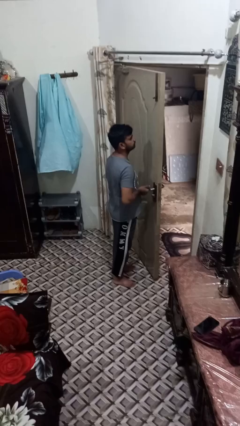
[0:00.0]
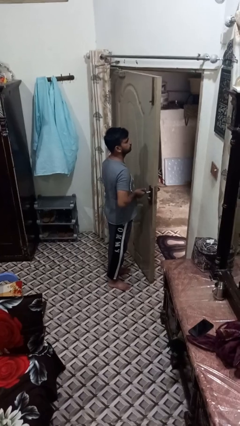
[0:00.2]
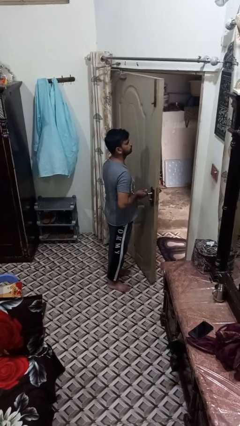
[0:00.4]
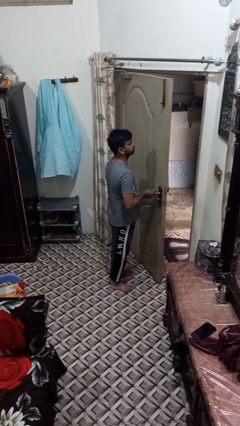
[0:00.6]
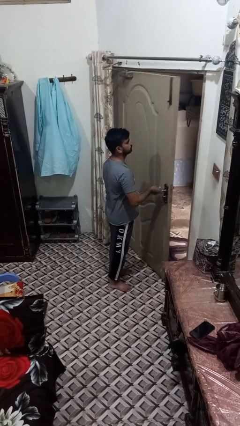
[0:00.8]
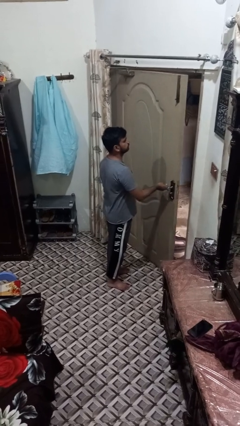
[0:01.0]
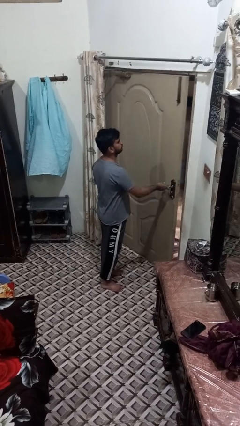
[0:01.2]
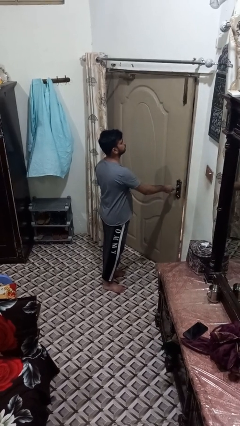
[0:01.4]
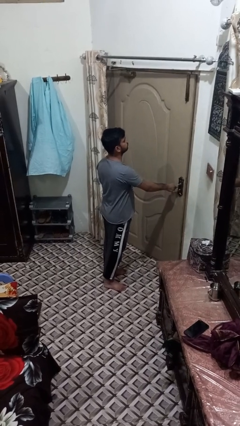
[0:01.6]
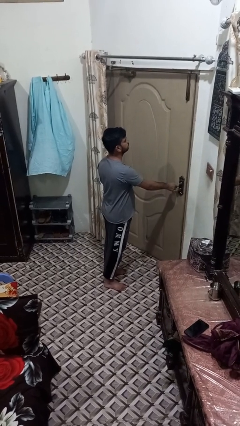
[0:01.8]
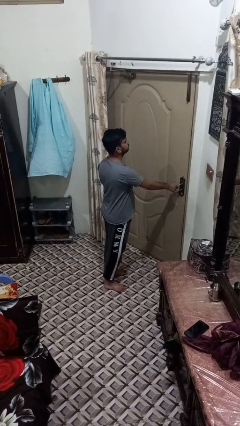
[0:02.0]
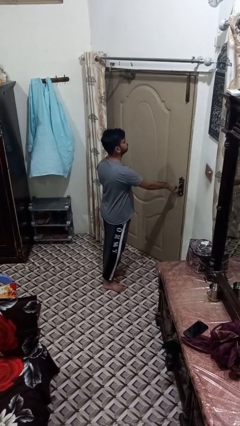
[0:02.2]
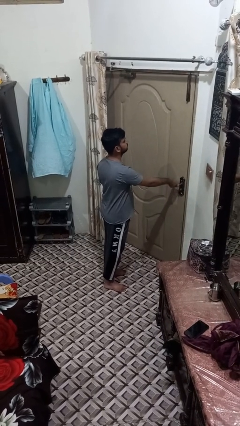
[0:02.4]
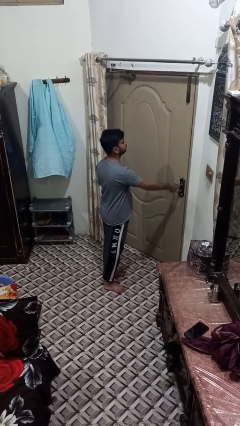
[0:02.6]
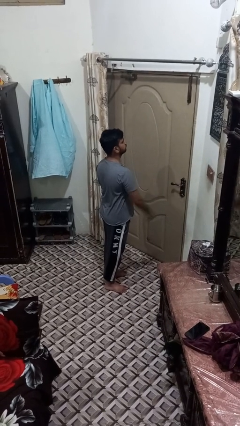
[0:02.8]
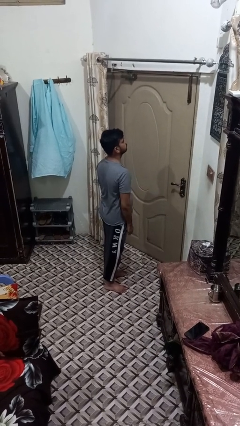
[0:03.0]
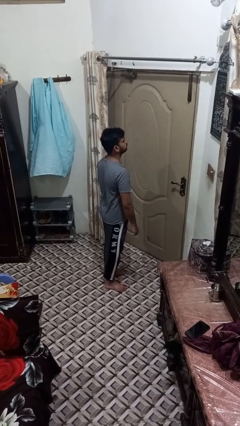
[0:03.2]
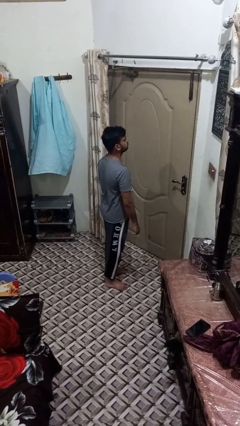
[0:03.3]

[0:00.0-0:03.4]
person closes facility door

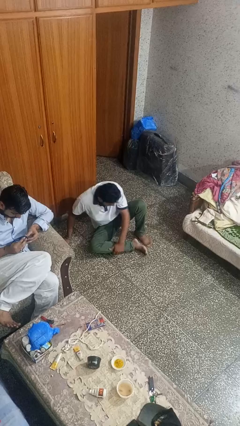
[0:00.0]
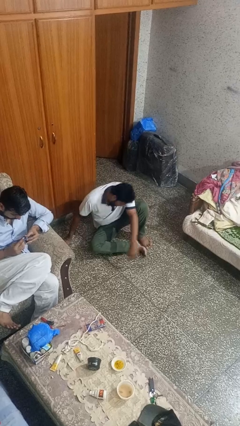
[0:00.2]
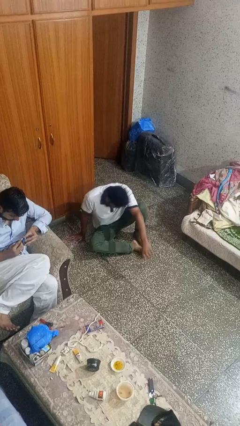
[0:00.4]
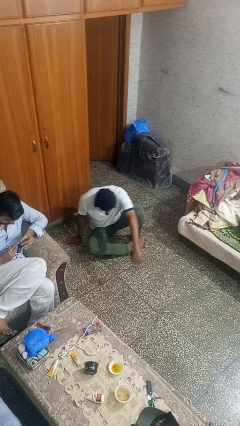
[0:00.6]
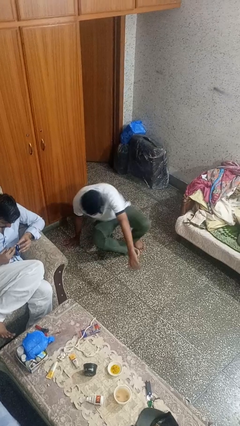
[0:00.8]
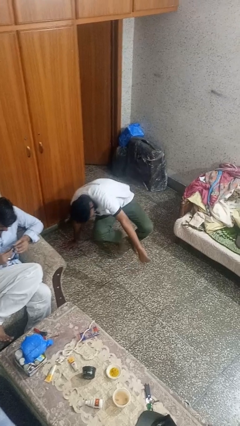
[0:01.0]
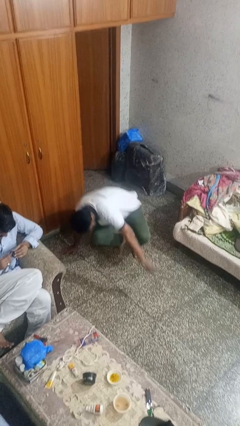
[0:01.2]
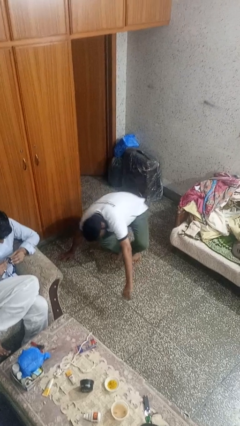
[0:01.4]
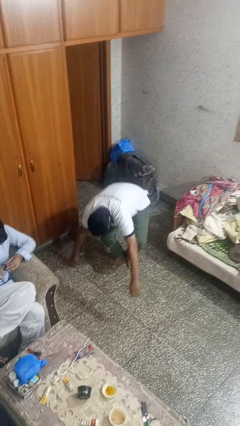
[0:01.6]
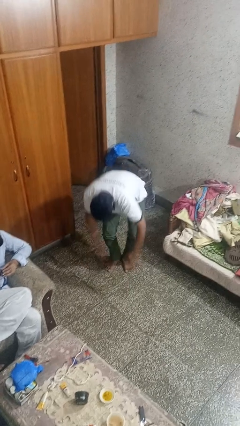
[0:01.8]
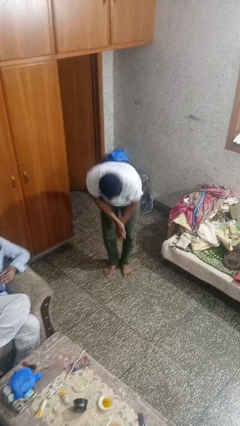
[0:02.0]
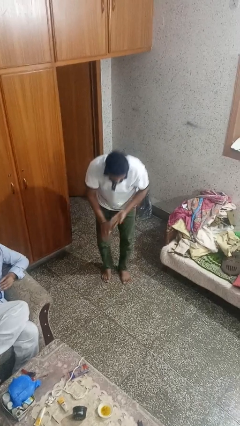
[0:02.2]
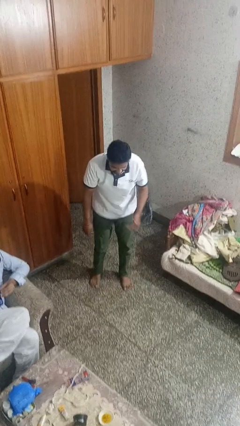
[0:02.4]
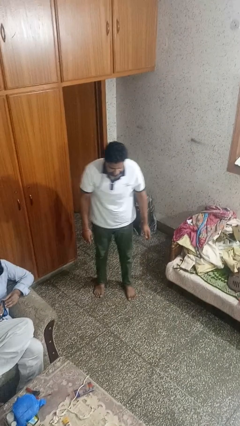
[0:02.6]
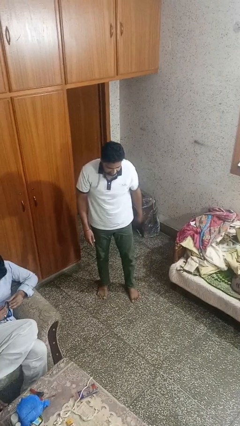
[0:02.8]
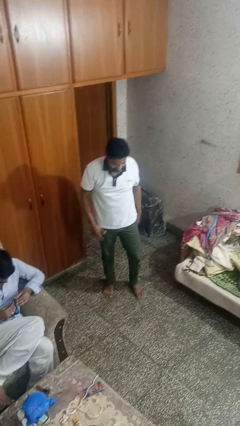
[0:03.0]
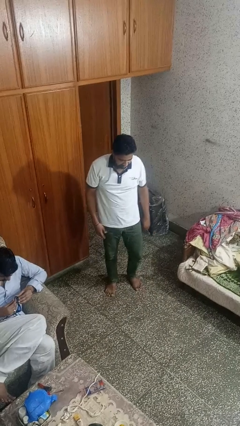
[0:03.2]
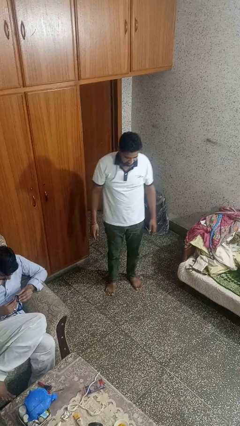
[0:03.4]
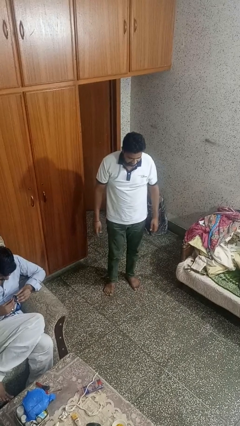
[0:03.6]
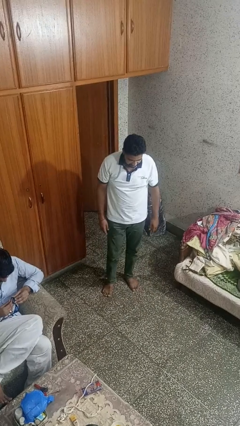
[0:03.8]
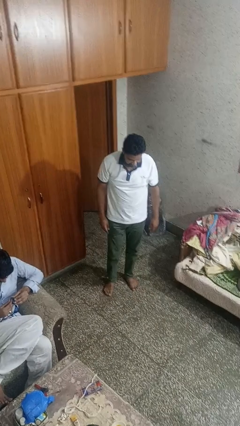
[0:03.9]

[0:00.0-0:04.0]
person stands up from floor

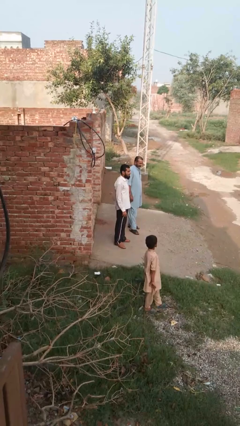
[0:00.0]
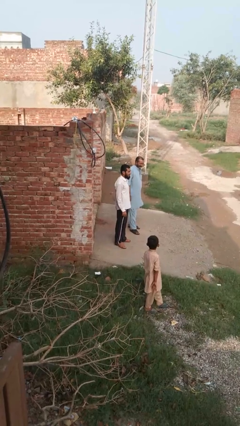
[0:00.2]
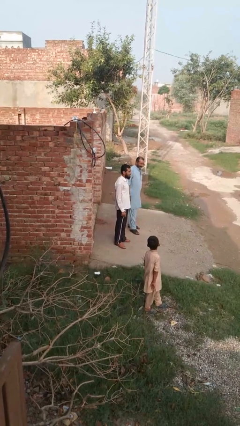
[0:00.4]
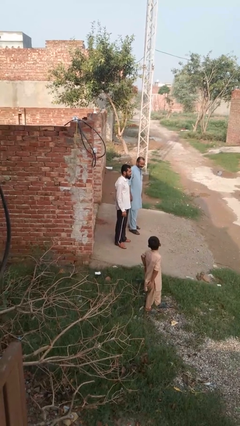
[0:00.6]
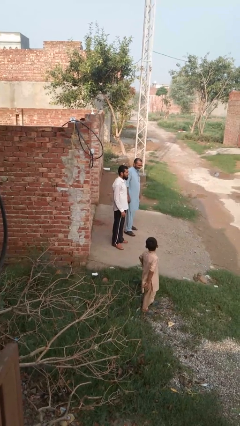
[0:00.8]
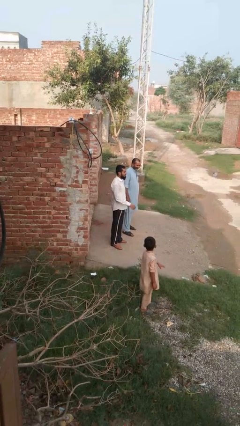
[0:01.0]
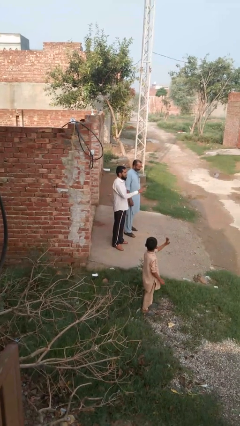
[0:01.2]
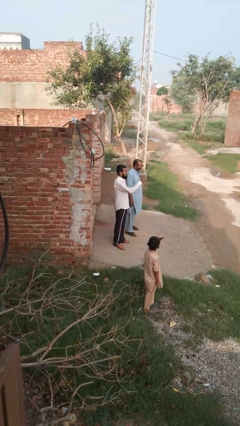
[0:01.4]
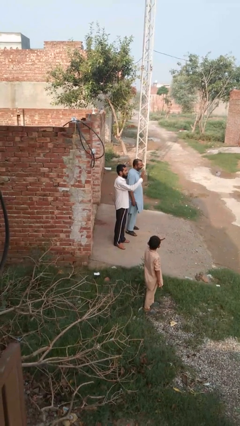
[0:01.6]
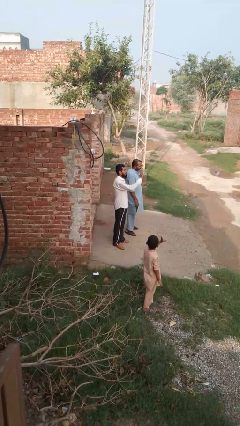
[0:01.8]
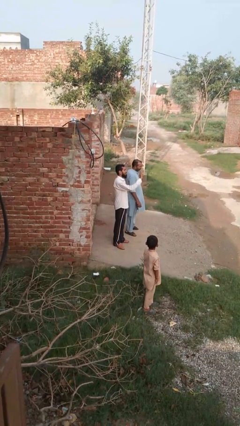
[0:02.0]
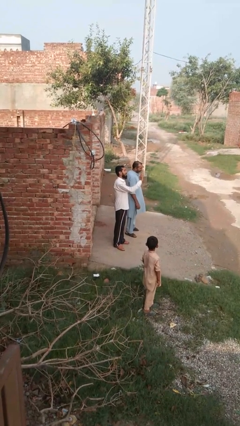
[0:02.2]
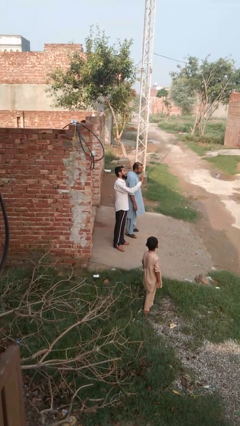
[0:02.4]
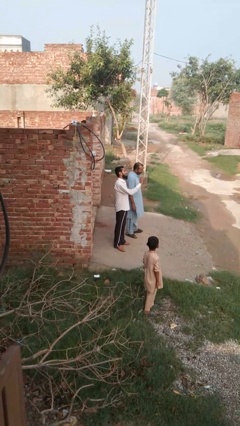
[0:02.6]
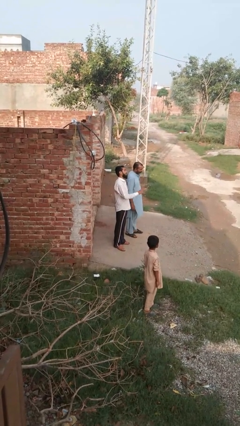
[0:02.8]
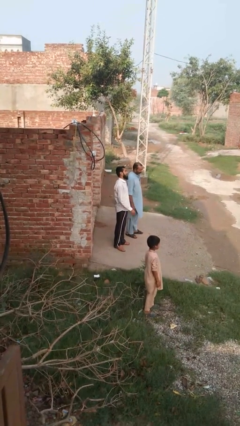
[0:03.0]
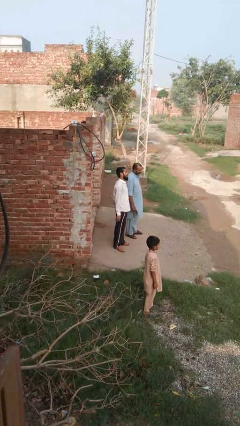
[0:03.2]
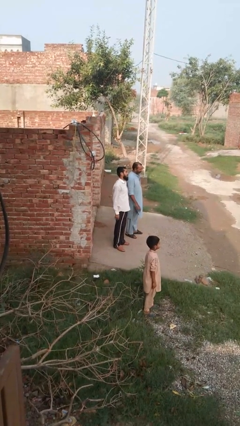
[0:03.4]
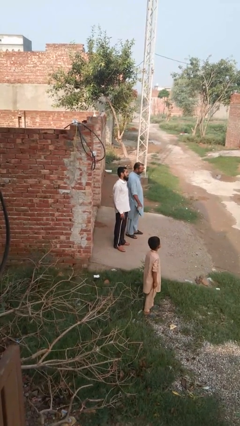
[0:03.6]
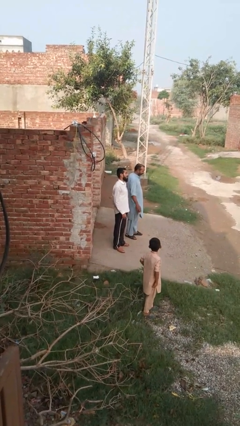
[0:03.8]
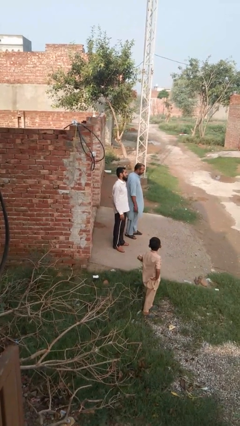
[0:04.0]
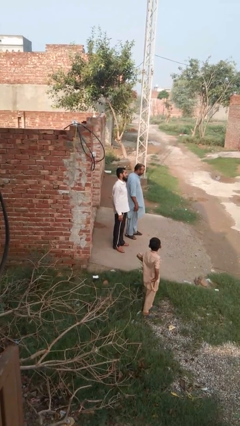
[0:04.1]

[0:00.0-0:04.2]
person waves at person

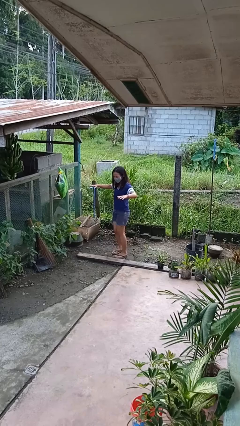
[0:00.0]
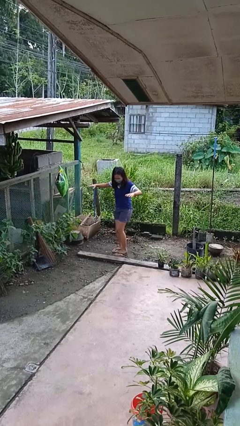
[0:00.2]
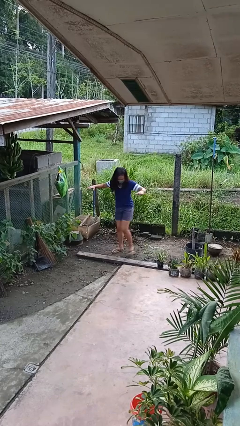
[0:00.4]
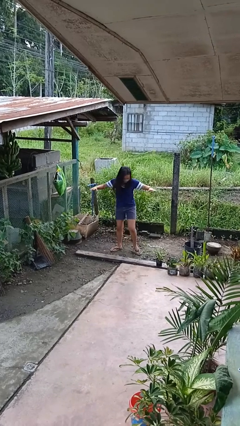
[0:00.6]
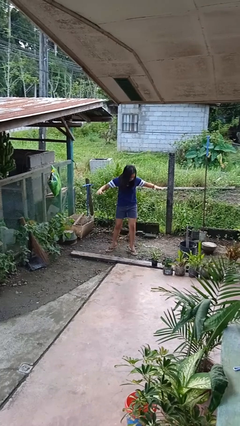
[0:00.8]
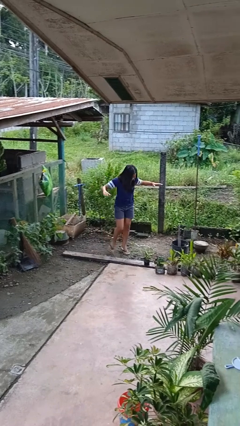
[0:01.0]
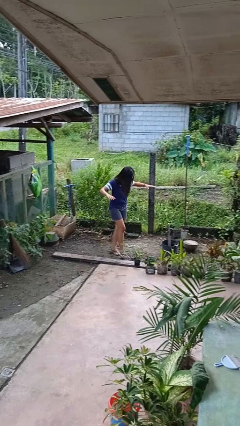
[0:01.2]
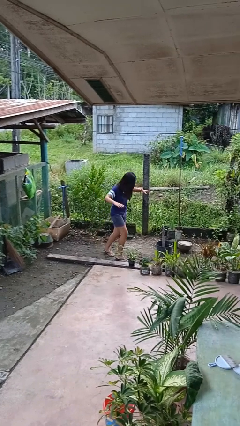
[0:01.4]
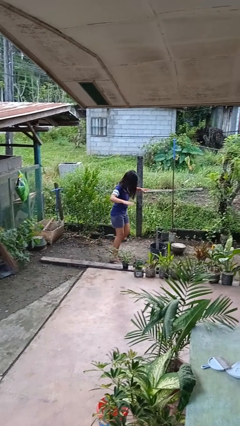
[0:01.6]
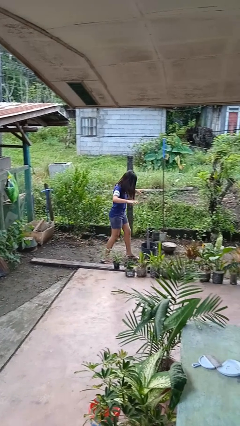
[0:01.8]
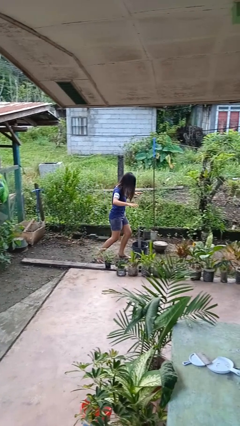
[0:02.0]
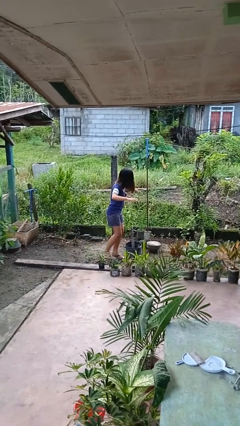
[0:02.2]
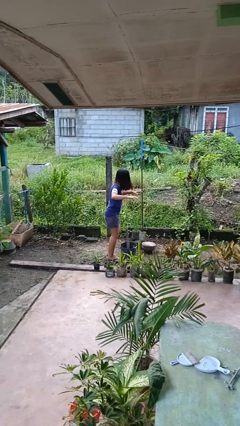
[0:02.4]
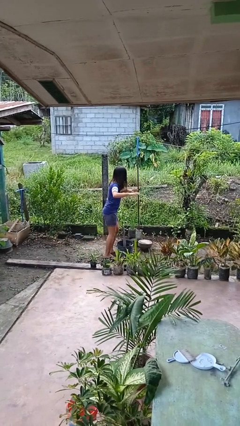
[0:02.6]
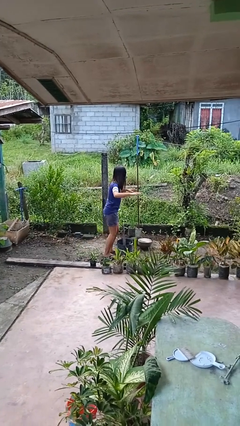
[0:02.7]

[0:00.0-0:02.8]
person walks tiptoe

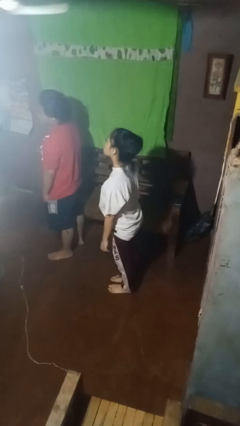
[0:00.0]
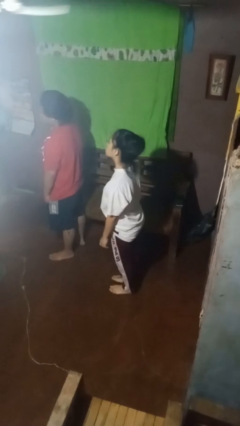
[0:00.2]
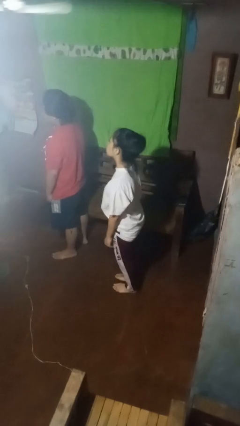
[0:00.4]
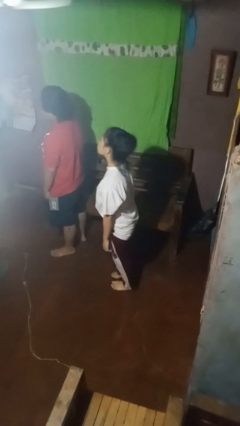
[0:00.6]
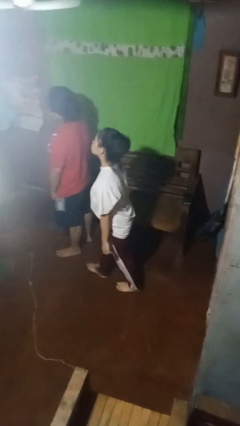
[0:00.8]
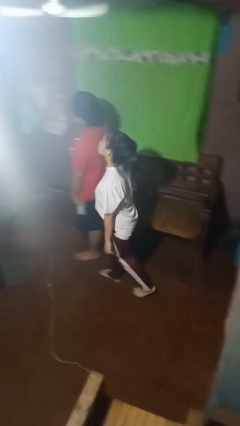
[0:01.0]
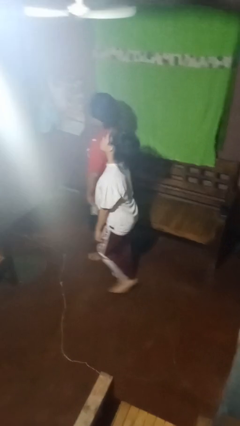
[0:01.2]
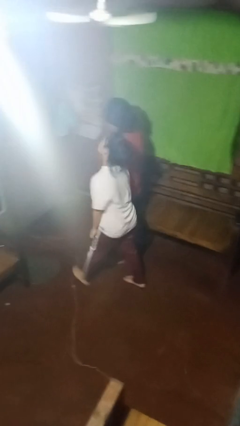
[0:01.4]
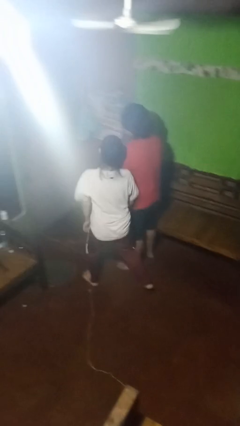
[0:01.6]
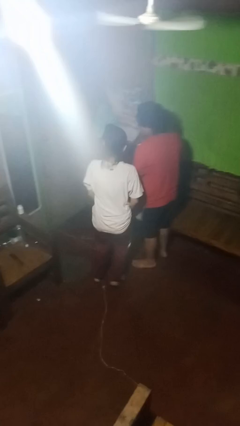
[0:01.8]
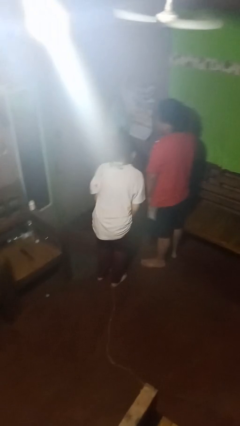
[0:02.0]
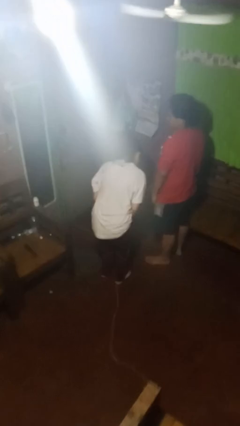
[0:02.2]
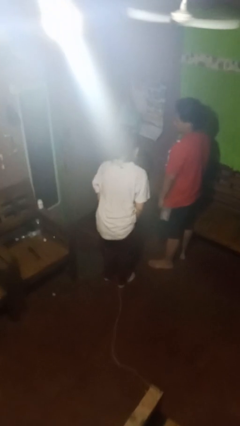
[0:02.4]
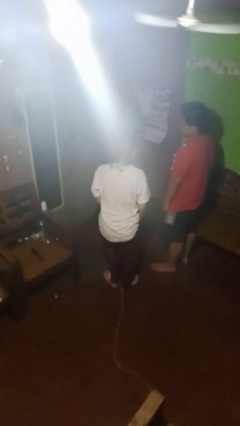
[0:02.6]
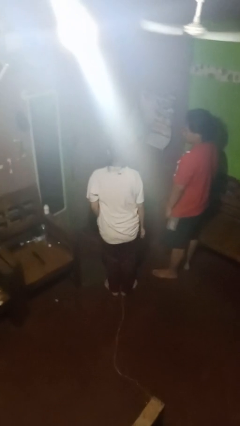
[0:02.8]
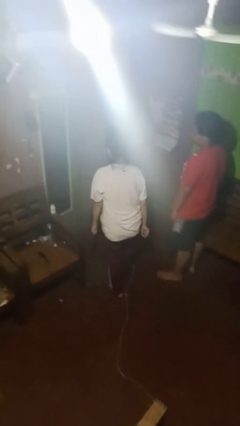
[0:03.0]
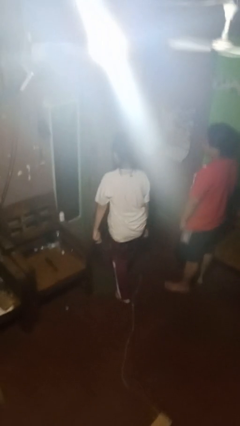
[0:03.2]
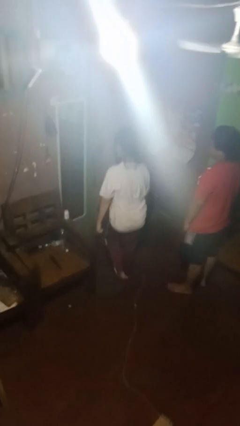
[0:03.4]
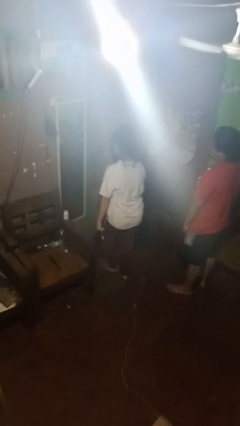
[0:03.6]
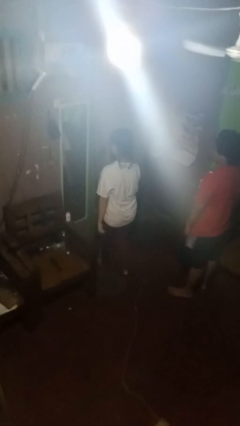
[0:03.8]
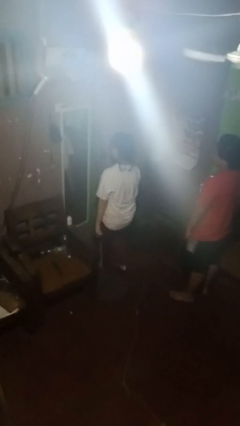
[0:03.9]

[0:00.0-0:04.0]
person bumps into person
